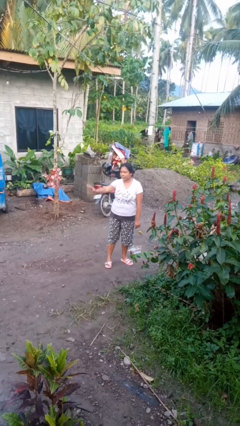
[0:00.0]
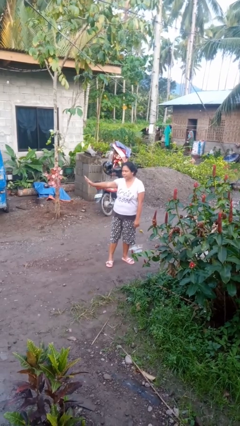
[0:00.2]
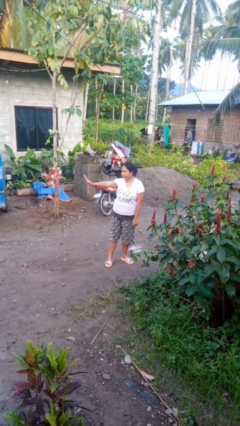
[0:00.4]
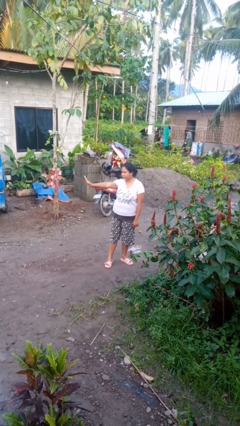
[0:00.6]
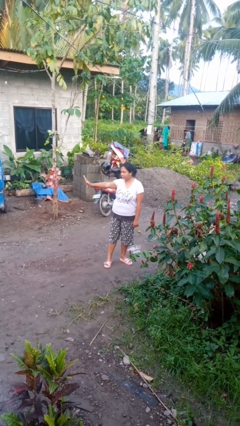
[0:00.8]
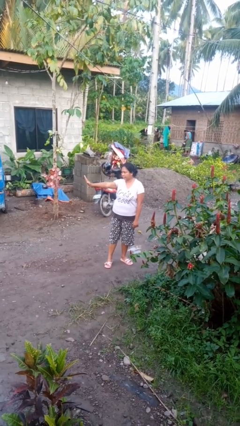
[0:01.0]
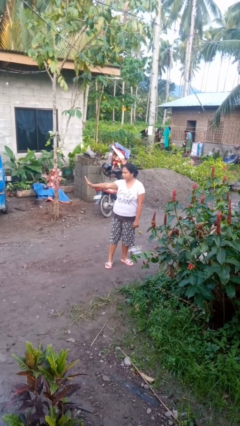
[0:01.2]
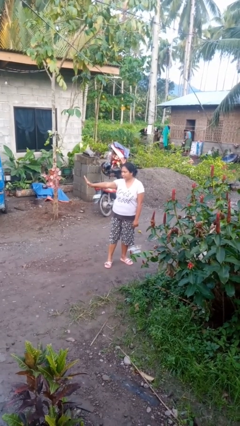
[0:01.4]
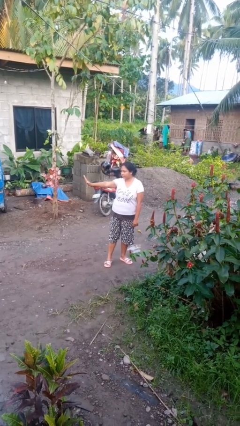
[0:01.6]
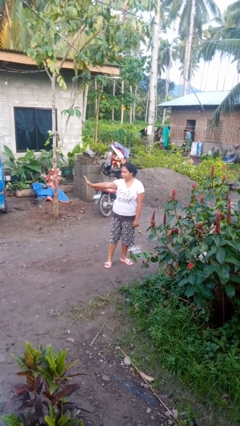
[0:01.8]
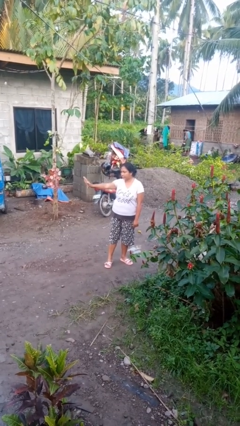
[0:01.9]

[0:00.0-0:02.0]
person gestures stop

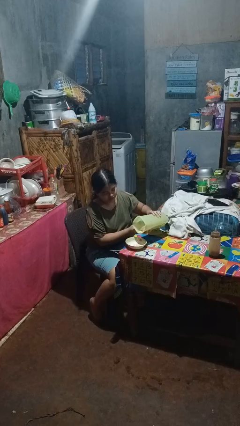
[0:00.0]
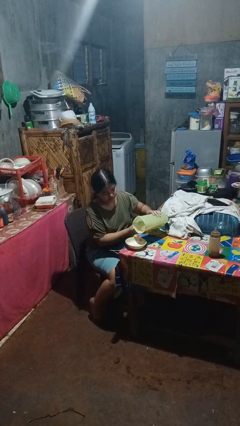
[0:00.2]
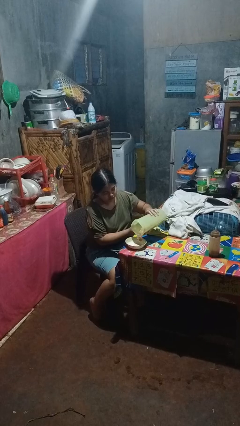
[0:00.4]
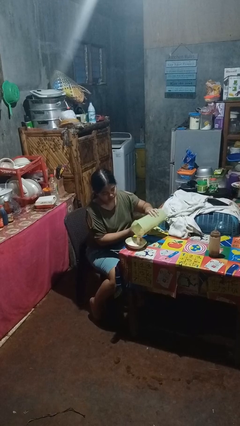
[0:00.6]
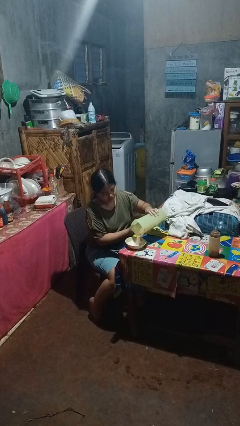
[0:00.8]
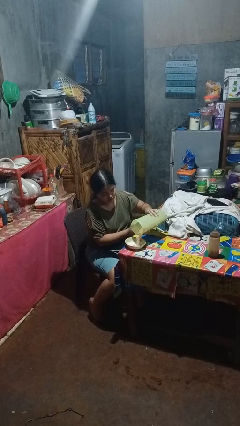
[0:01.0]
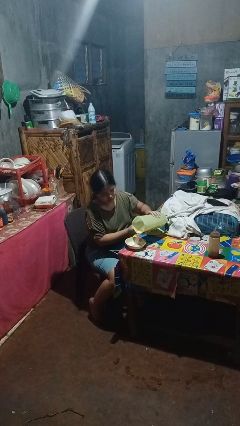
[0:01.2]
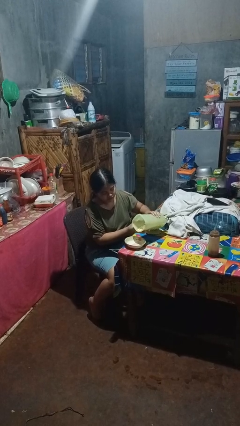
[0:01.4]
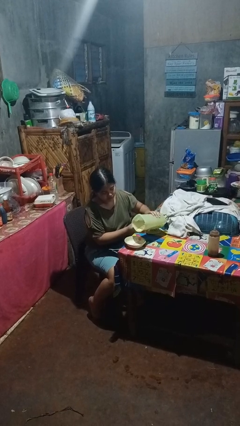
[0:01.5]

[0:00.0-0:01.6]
person pours into bowl

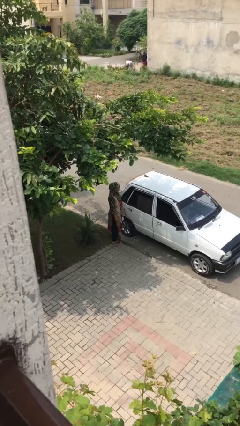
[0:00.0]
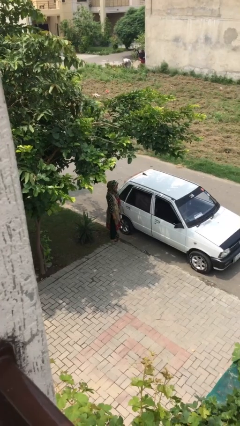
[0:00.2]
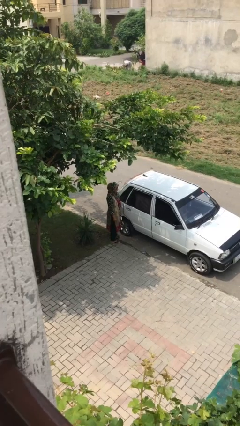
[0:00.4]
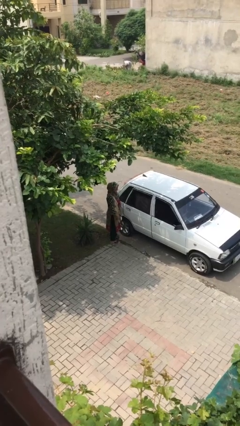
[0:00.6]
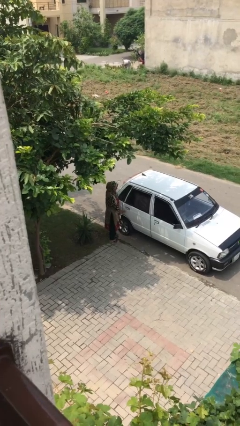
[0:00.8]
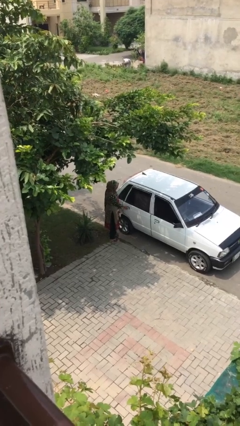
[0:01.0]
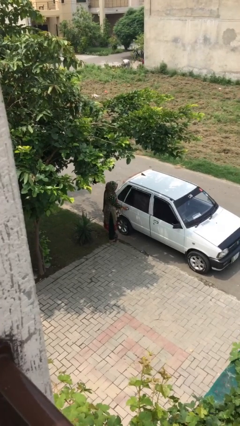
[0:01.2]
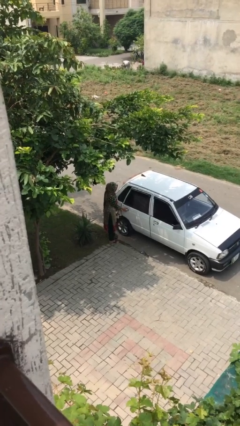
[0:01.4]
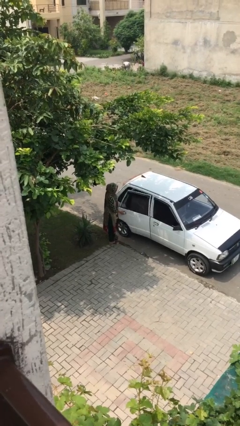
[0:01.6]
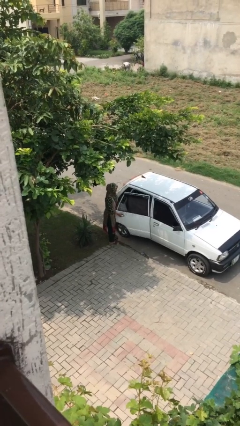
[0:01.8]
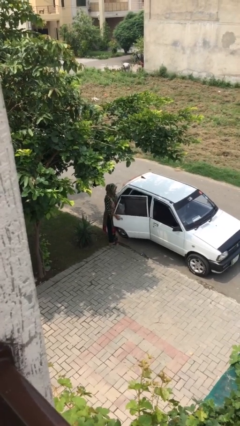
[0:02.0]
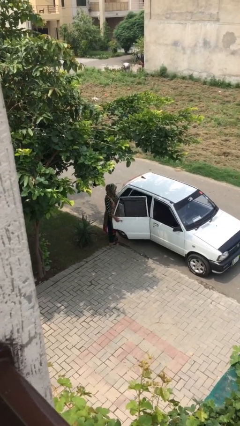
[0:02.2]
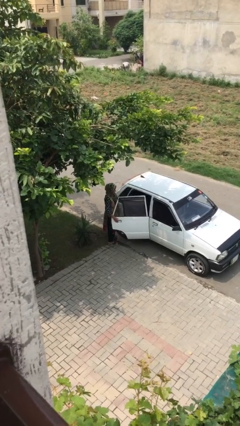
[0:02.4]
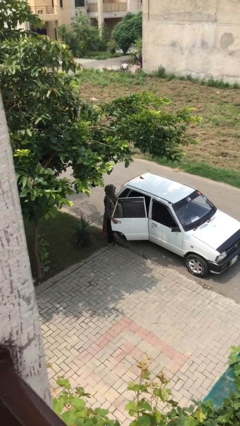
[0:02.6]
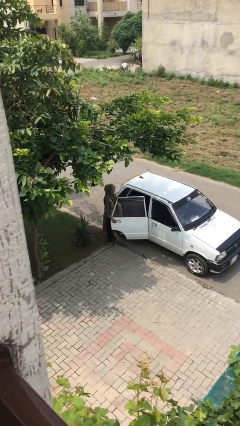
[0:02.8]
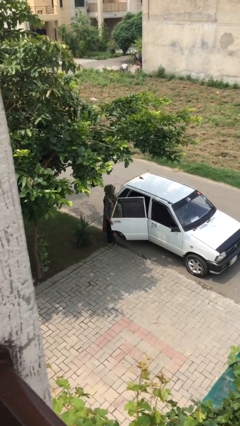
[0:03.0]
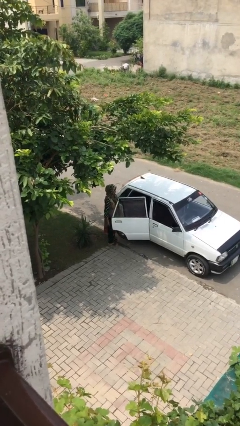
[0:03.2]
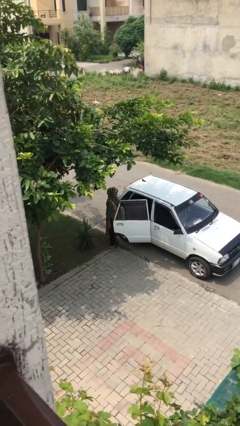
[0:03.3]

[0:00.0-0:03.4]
person opens car door

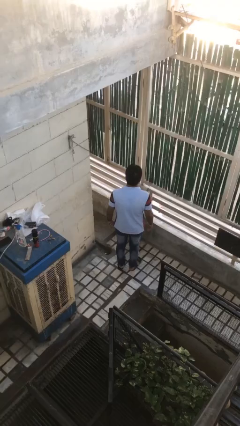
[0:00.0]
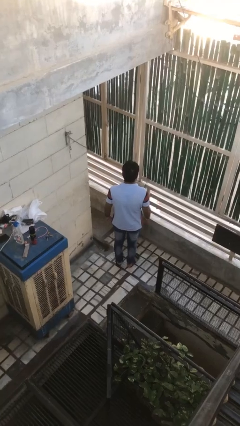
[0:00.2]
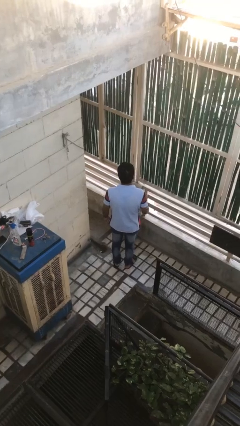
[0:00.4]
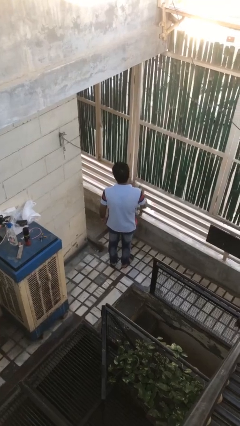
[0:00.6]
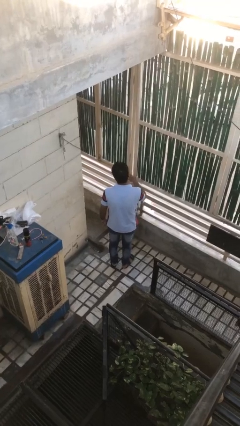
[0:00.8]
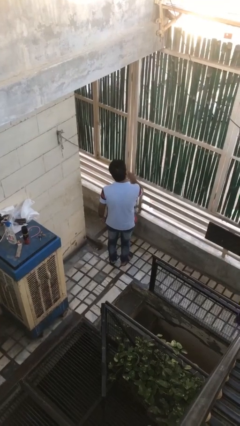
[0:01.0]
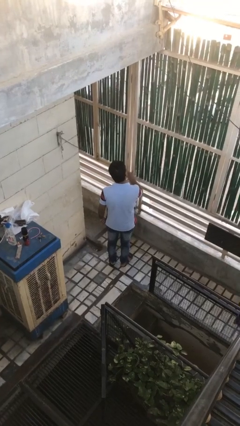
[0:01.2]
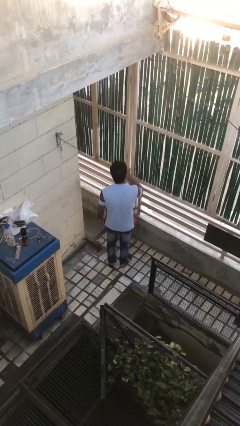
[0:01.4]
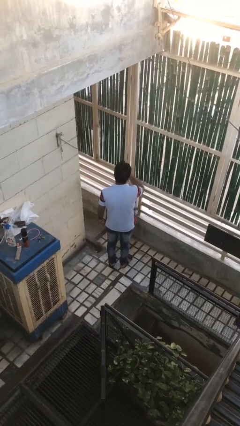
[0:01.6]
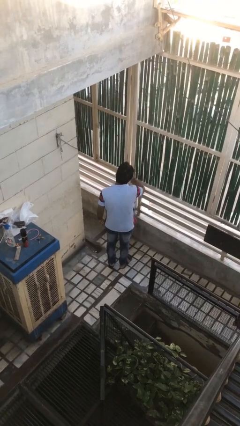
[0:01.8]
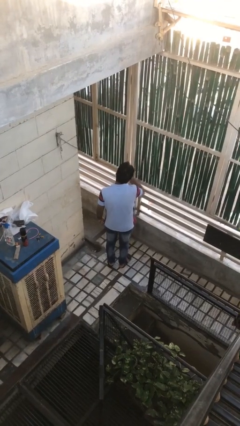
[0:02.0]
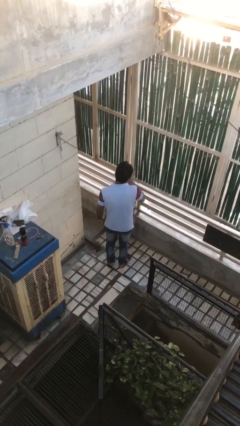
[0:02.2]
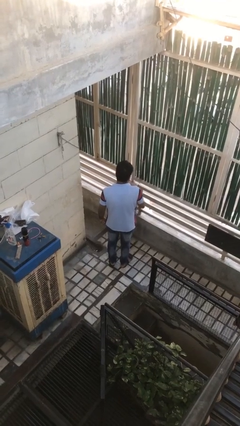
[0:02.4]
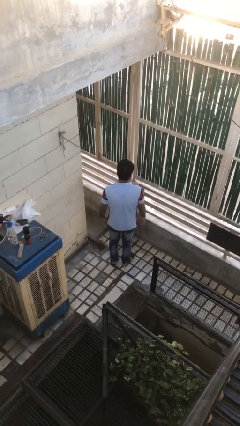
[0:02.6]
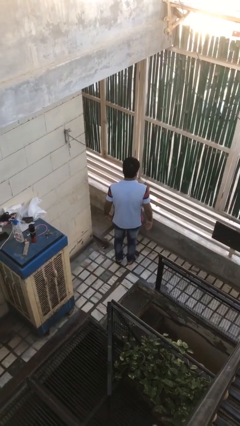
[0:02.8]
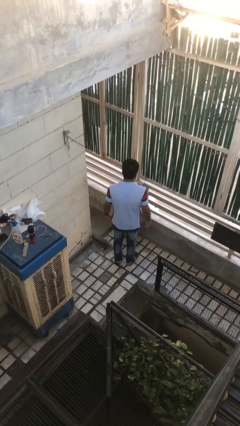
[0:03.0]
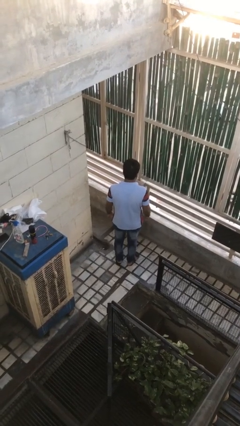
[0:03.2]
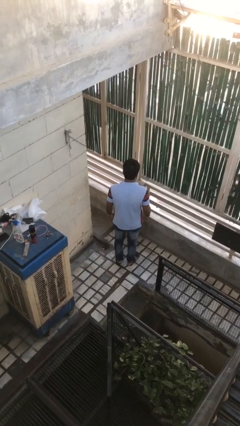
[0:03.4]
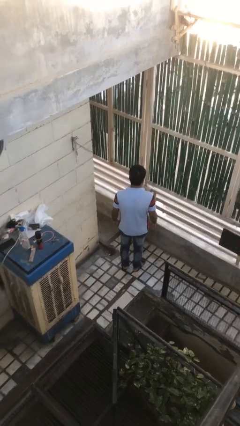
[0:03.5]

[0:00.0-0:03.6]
person licks fingers

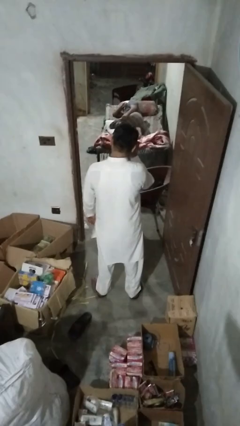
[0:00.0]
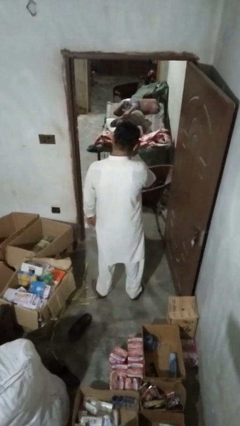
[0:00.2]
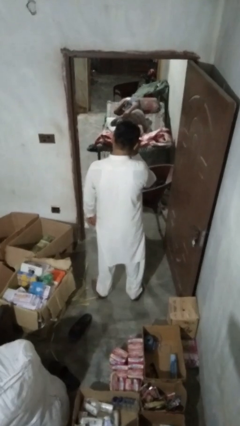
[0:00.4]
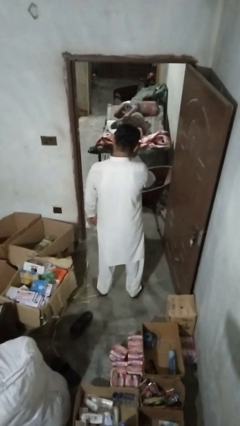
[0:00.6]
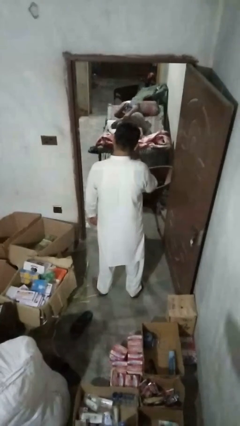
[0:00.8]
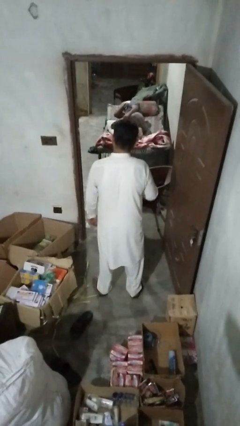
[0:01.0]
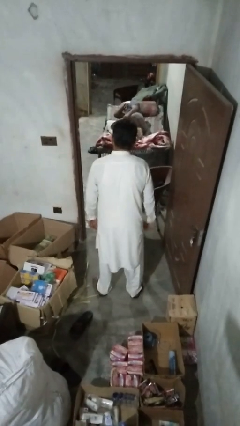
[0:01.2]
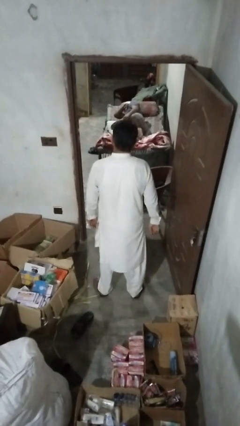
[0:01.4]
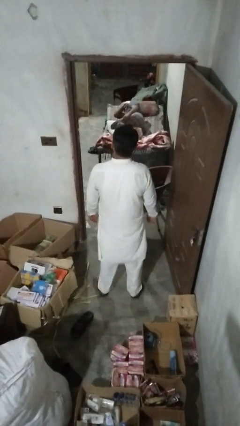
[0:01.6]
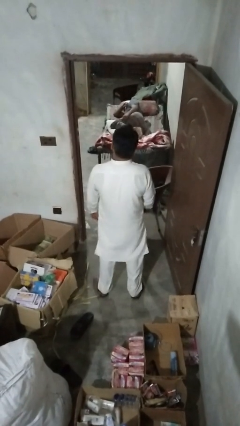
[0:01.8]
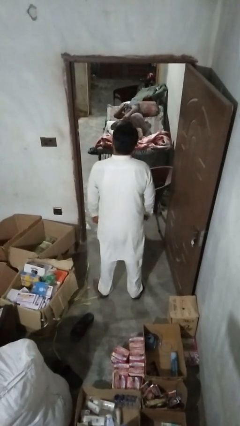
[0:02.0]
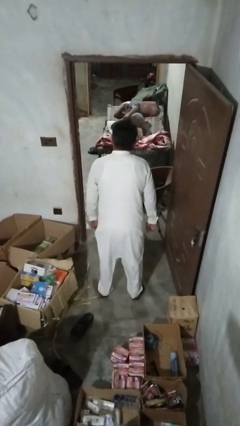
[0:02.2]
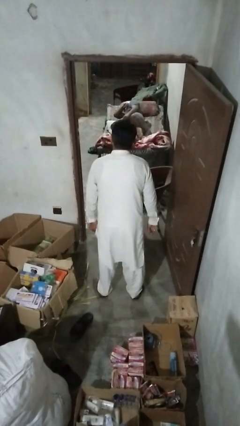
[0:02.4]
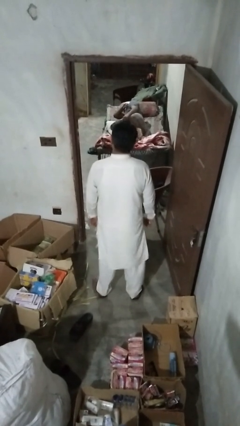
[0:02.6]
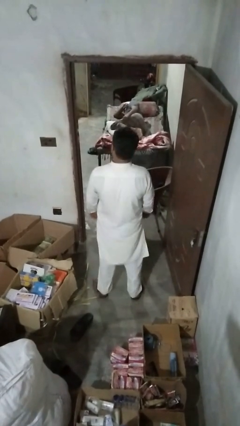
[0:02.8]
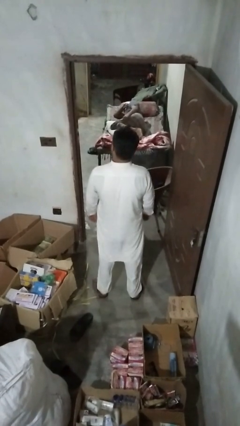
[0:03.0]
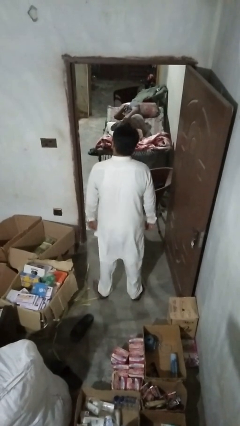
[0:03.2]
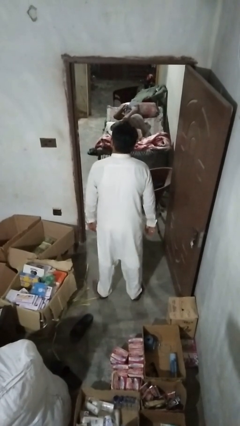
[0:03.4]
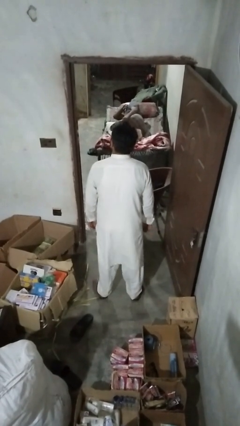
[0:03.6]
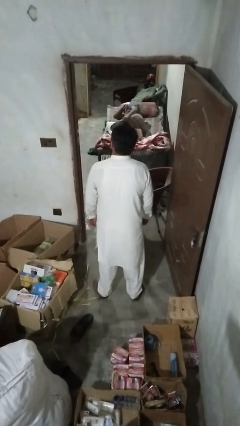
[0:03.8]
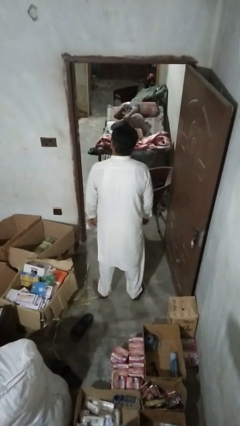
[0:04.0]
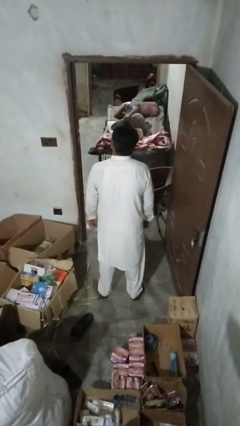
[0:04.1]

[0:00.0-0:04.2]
person wiggles hips

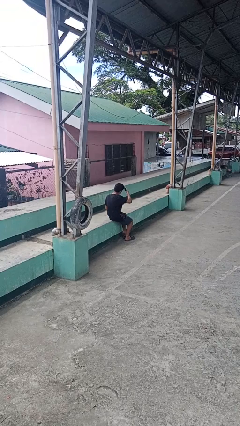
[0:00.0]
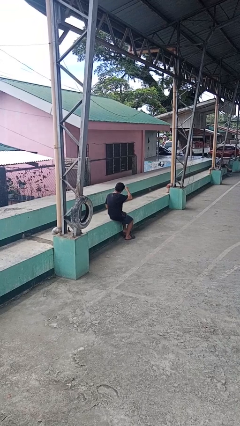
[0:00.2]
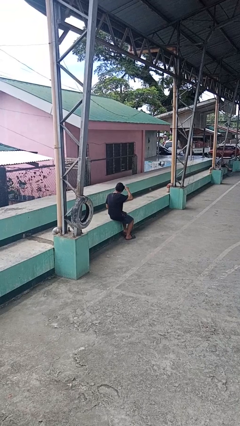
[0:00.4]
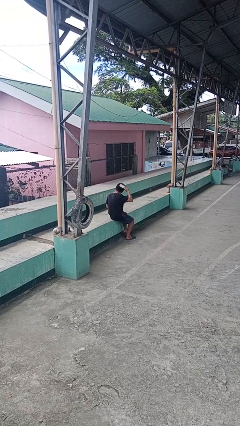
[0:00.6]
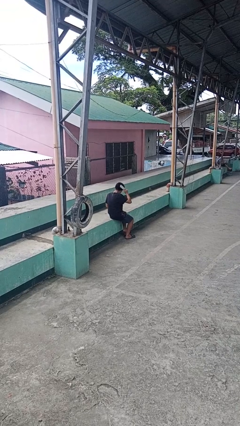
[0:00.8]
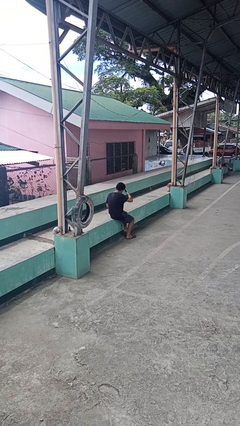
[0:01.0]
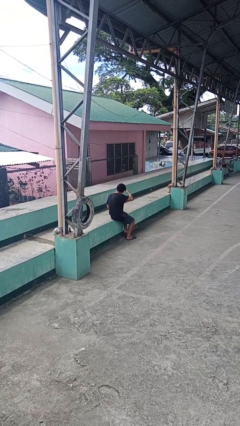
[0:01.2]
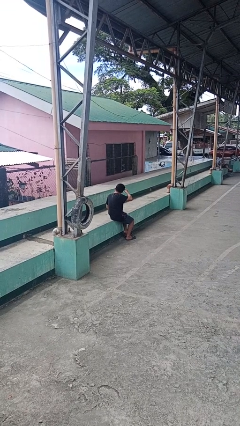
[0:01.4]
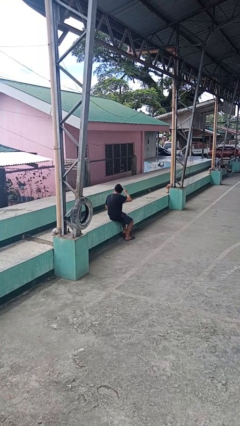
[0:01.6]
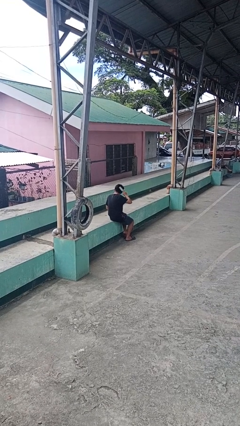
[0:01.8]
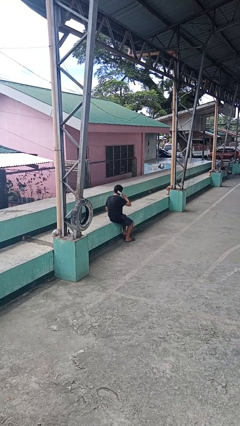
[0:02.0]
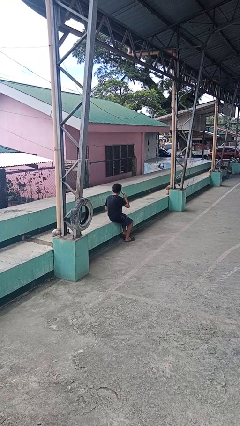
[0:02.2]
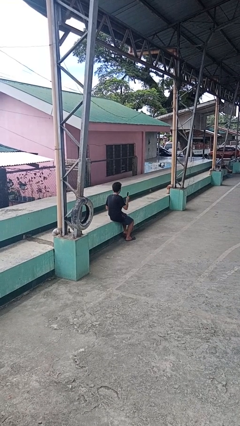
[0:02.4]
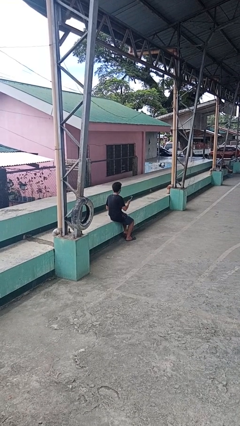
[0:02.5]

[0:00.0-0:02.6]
person brushes hair
